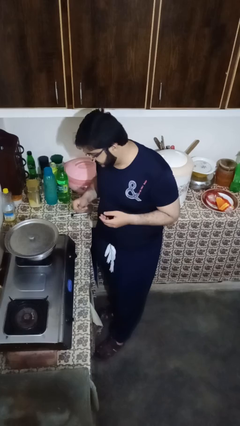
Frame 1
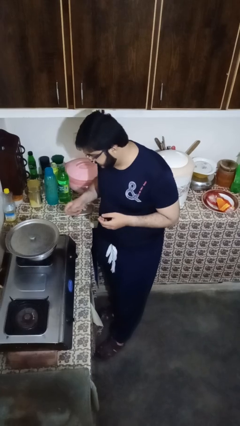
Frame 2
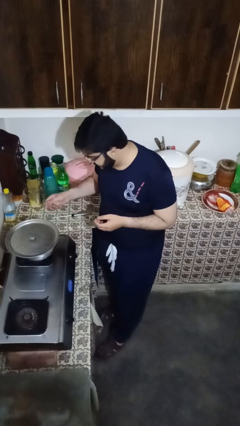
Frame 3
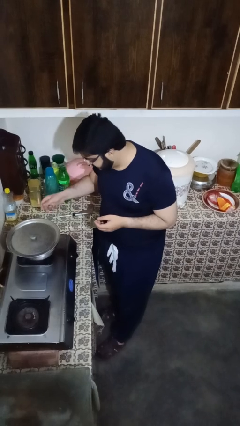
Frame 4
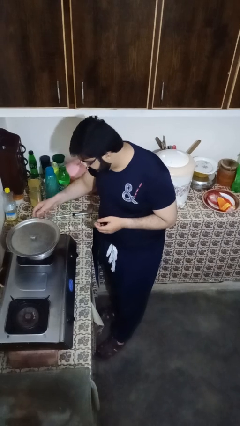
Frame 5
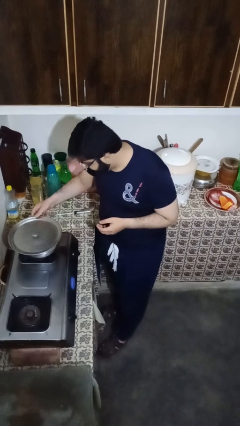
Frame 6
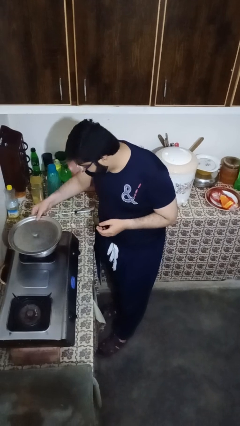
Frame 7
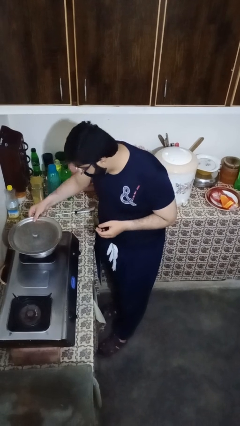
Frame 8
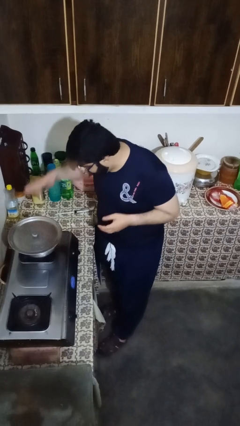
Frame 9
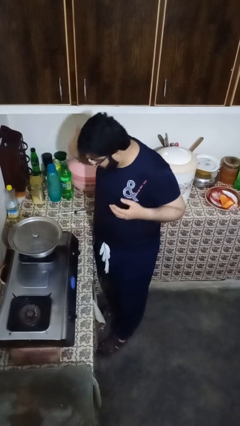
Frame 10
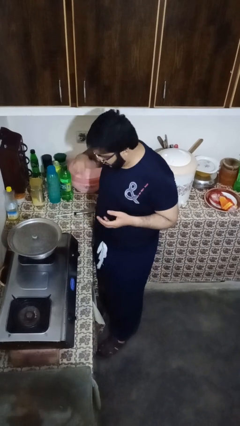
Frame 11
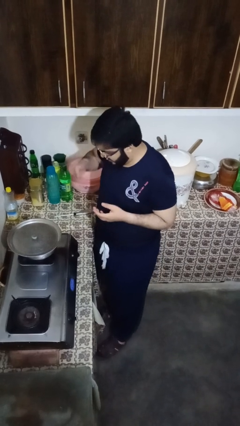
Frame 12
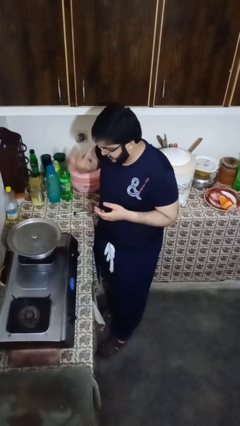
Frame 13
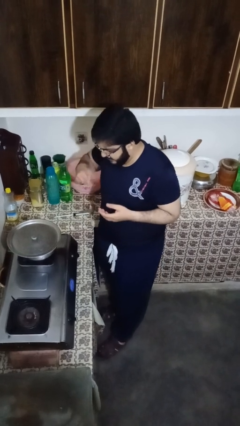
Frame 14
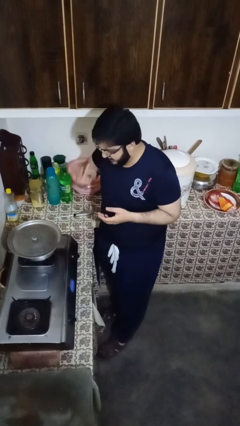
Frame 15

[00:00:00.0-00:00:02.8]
person burns hand

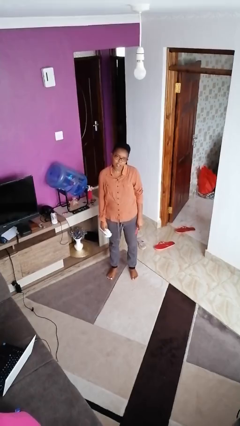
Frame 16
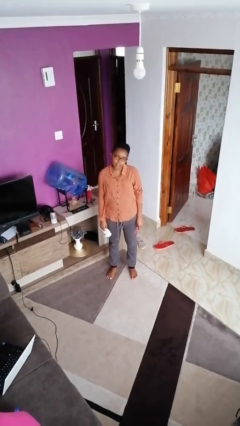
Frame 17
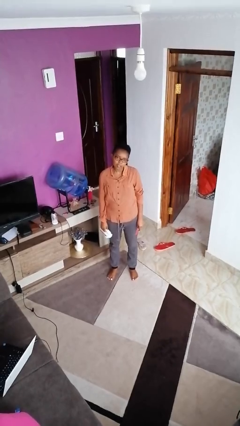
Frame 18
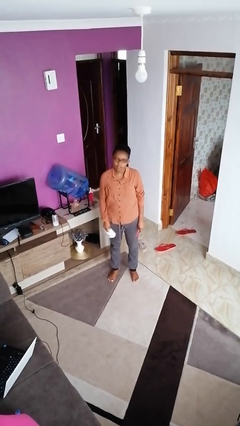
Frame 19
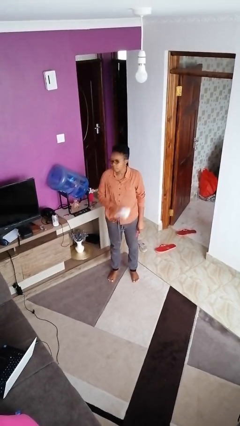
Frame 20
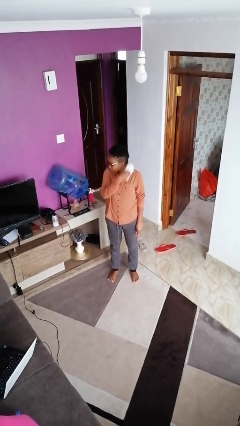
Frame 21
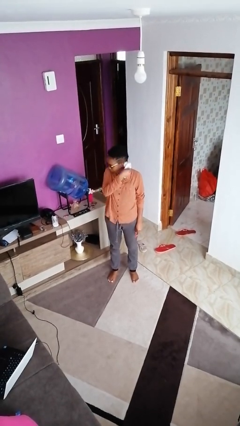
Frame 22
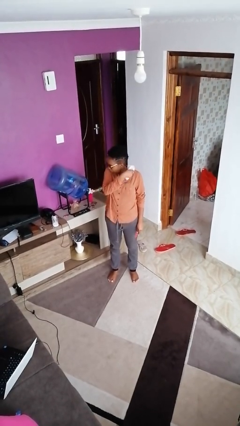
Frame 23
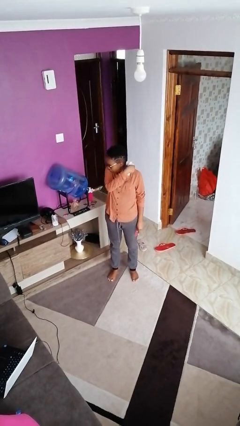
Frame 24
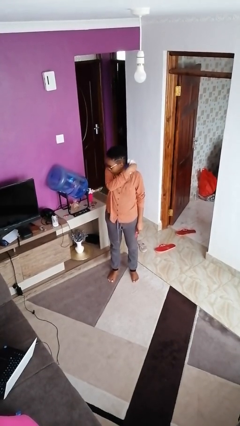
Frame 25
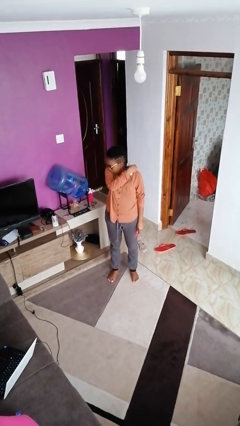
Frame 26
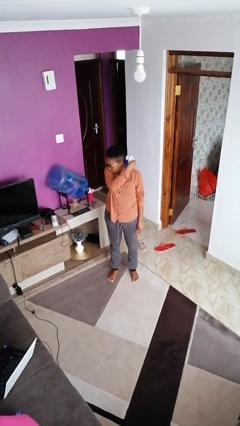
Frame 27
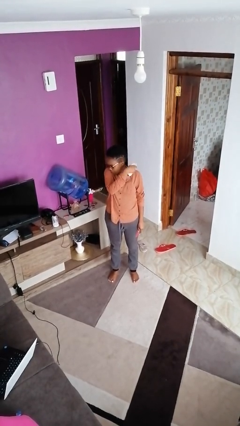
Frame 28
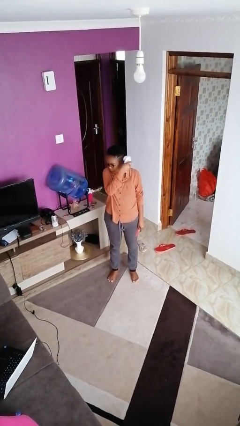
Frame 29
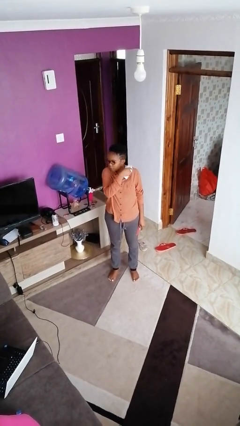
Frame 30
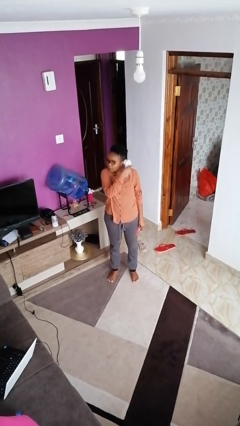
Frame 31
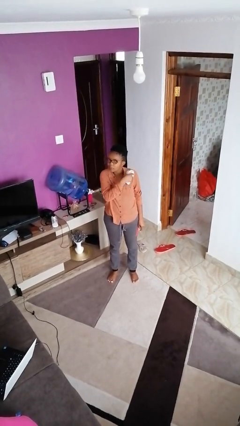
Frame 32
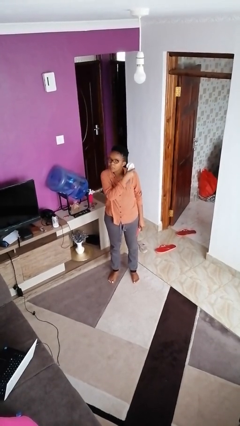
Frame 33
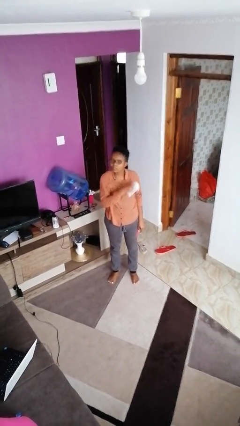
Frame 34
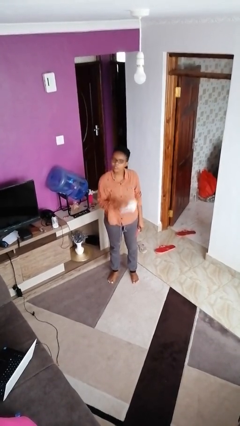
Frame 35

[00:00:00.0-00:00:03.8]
person brushes hair

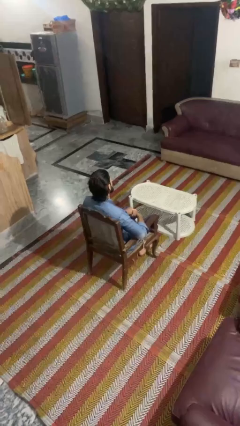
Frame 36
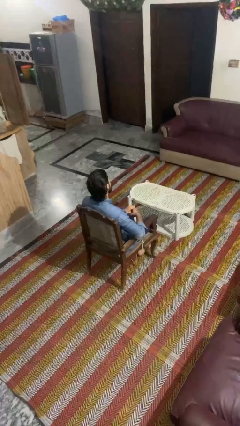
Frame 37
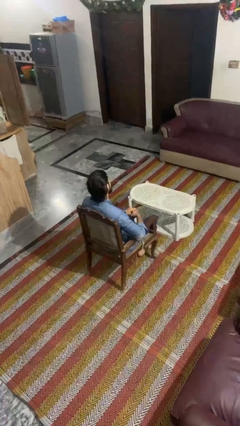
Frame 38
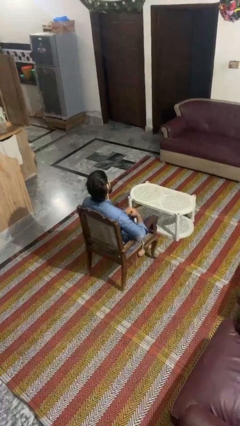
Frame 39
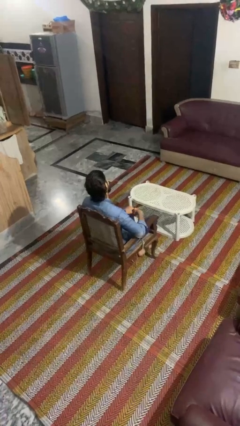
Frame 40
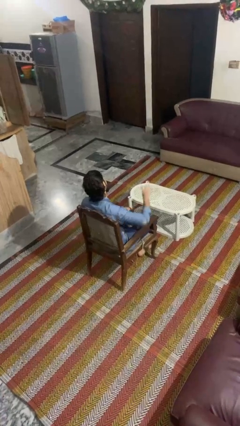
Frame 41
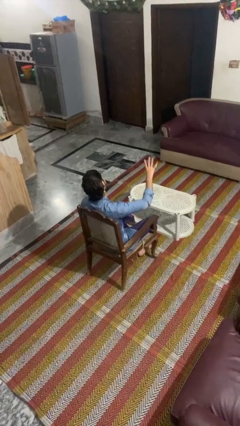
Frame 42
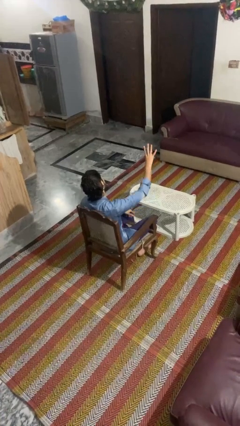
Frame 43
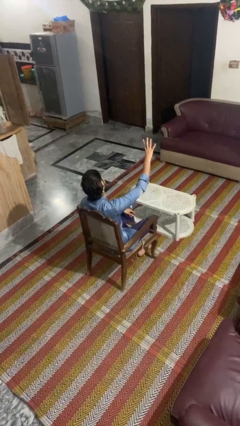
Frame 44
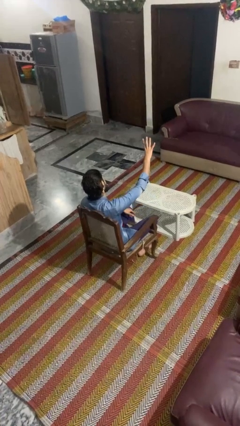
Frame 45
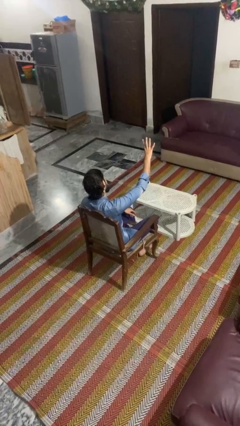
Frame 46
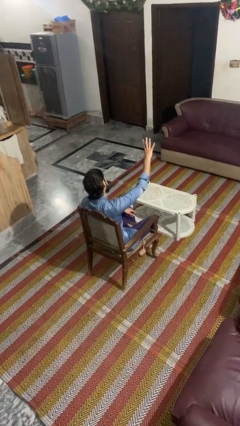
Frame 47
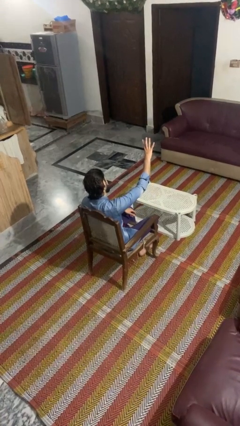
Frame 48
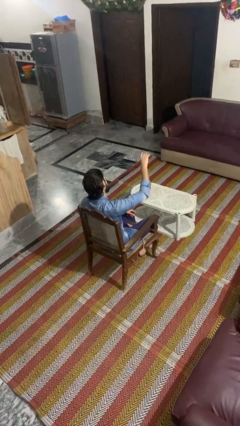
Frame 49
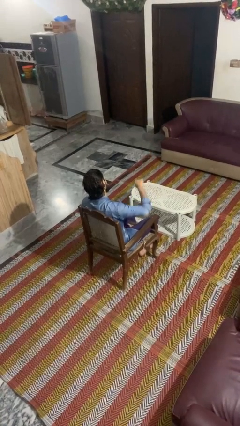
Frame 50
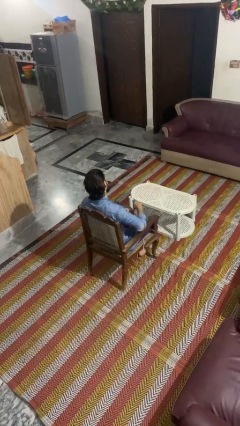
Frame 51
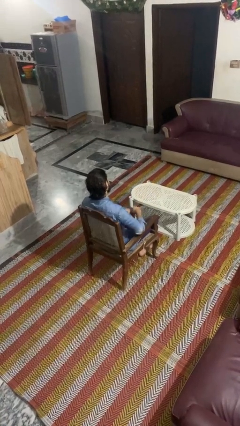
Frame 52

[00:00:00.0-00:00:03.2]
person gestures number four

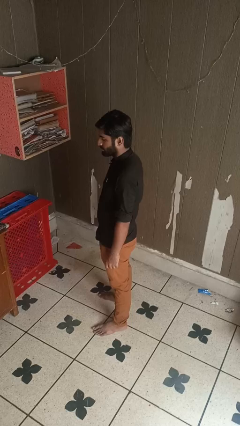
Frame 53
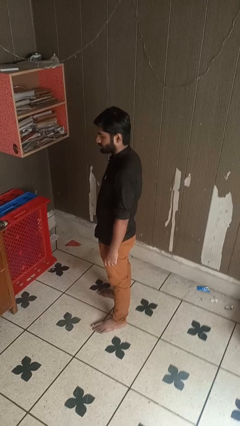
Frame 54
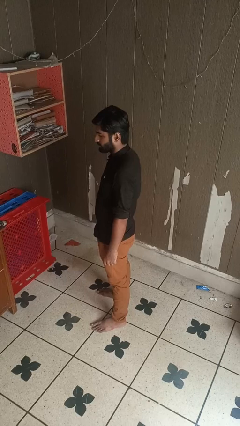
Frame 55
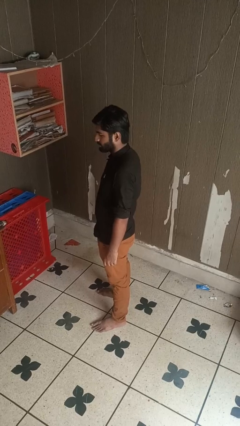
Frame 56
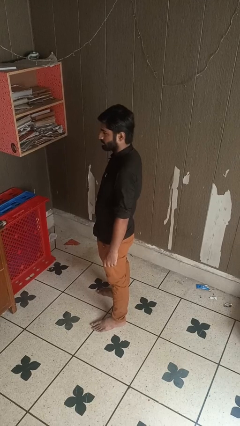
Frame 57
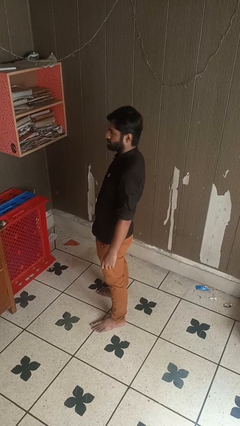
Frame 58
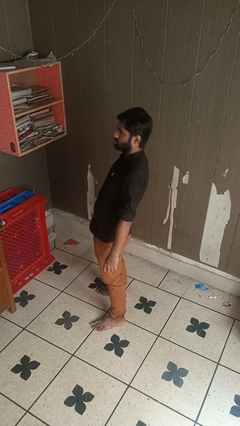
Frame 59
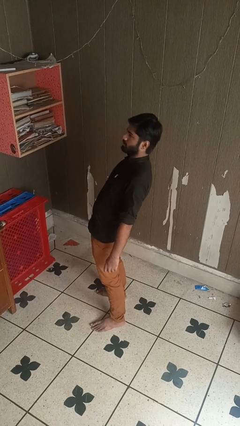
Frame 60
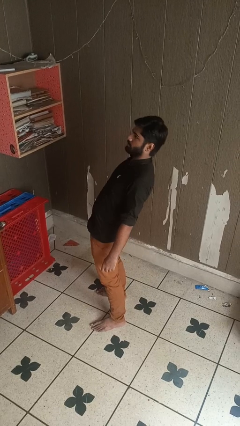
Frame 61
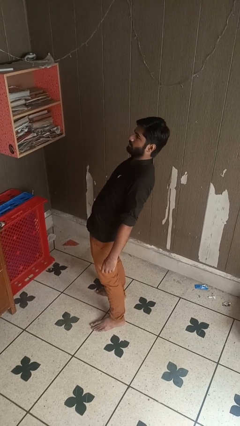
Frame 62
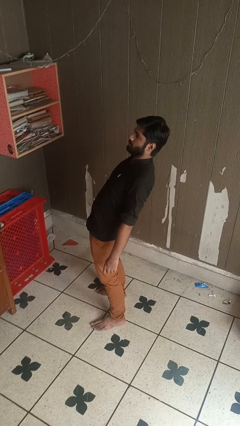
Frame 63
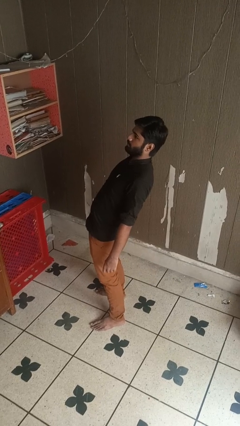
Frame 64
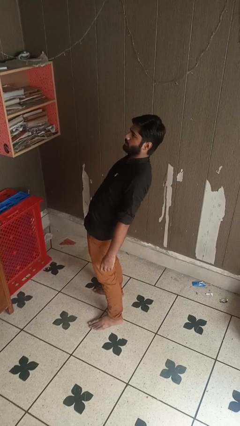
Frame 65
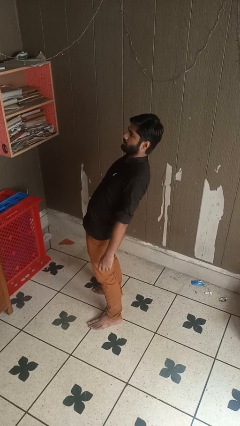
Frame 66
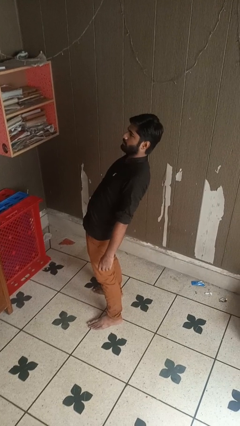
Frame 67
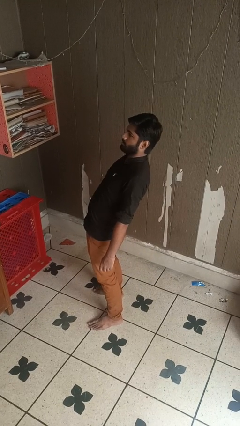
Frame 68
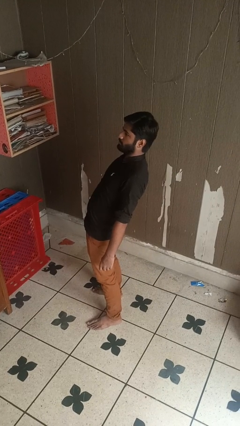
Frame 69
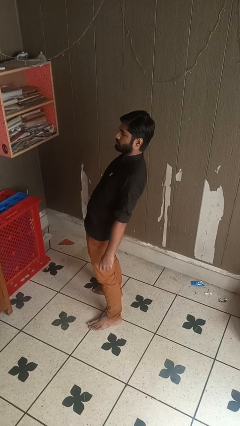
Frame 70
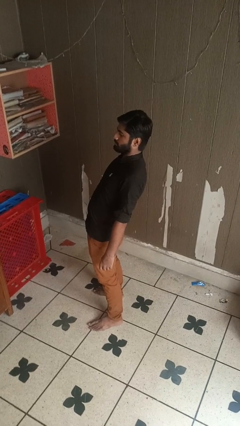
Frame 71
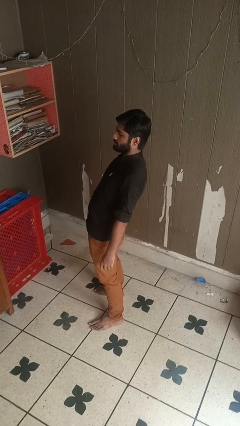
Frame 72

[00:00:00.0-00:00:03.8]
person stretches back

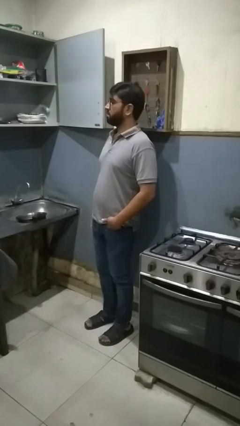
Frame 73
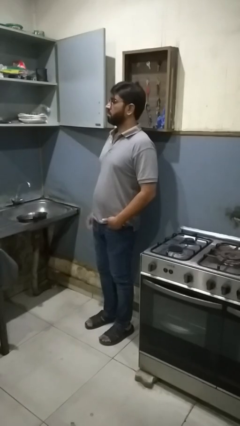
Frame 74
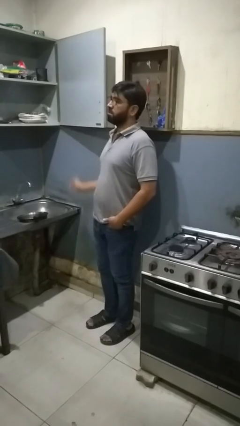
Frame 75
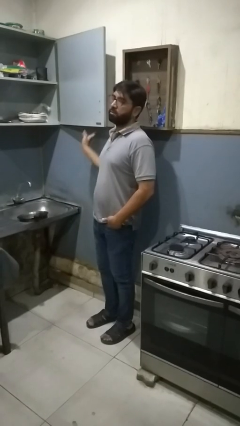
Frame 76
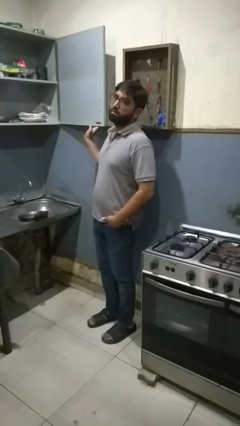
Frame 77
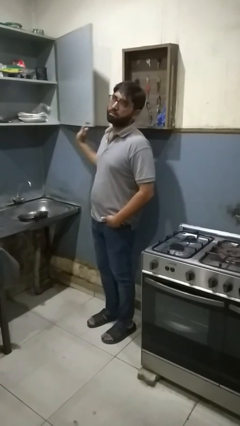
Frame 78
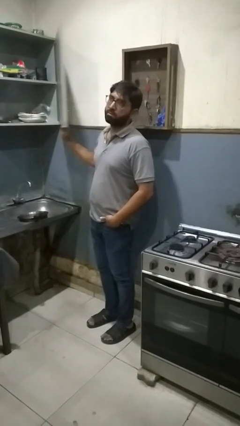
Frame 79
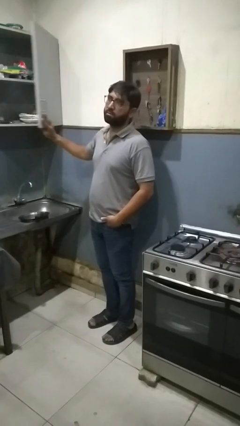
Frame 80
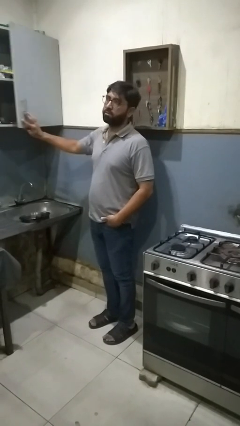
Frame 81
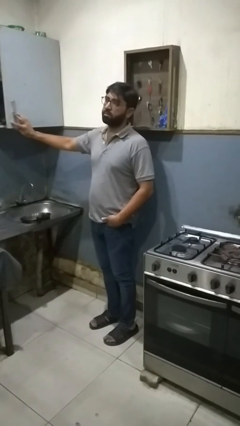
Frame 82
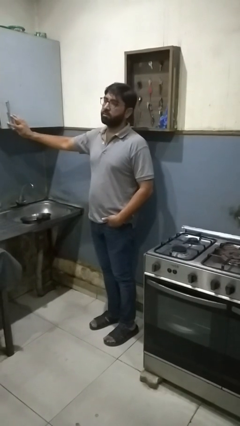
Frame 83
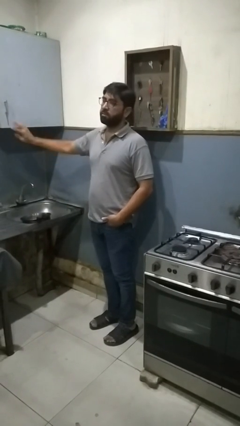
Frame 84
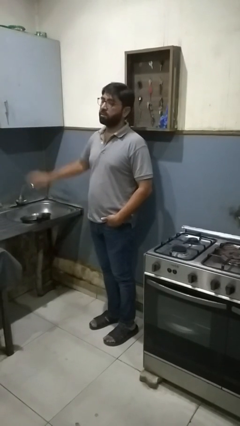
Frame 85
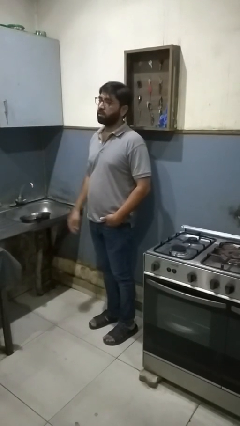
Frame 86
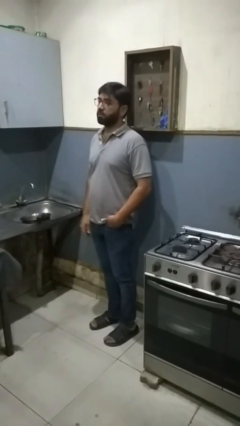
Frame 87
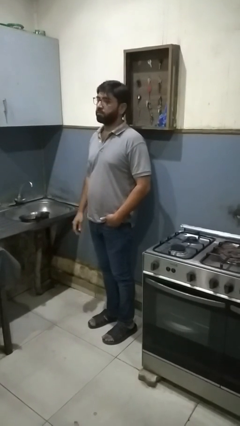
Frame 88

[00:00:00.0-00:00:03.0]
person closes kitchen drawer

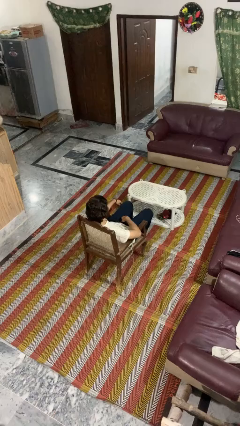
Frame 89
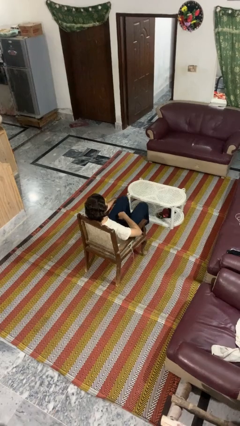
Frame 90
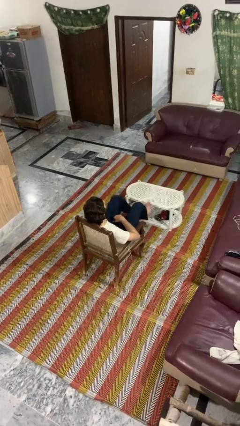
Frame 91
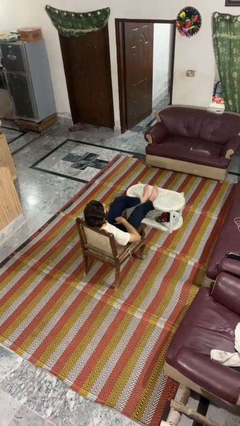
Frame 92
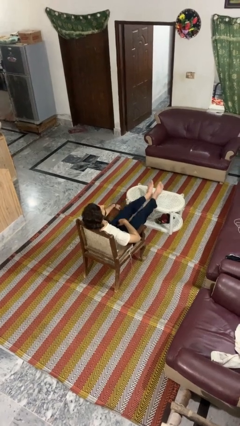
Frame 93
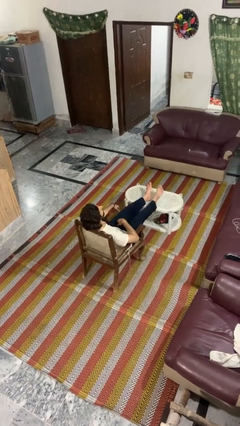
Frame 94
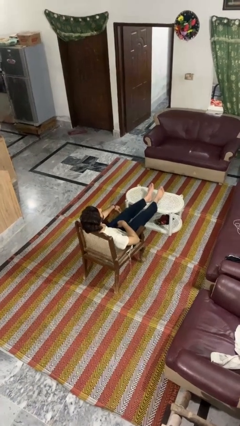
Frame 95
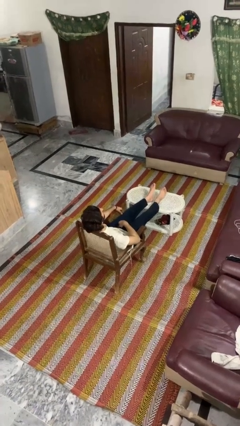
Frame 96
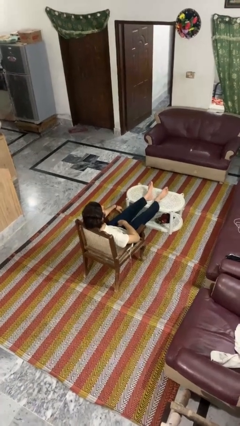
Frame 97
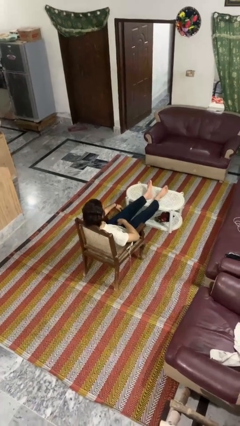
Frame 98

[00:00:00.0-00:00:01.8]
person puts feet up
